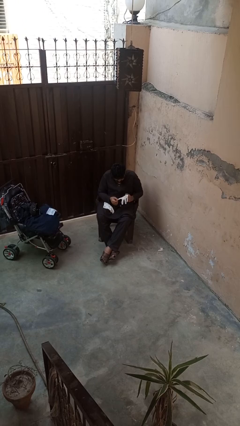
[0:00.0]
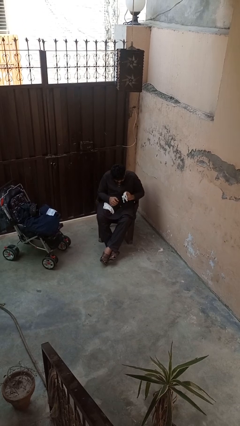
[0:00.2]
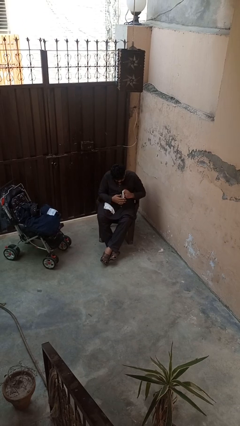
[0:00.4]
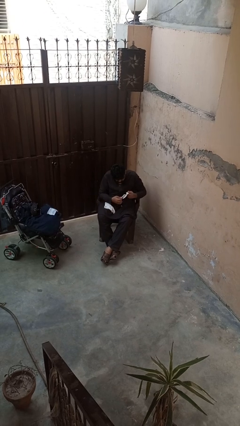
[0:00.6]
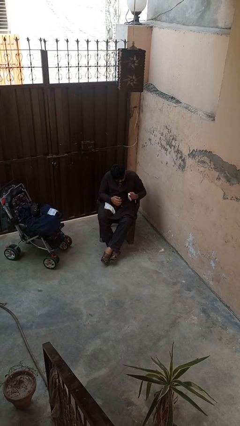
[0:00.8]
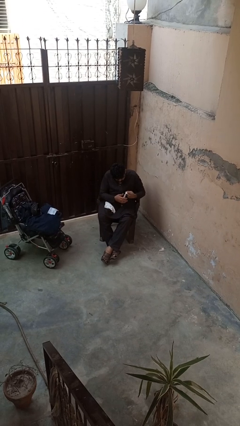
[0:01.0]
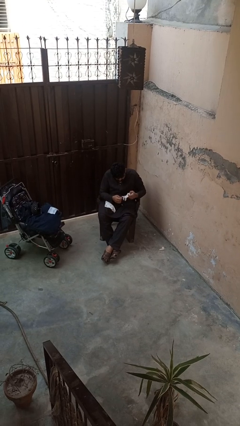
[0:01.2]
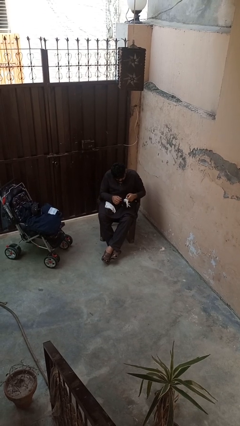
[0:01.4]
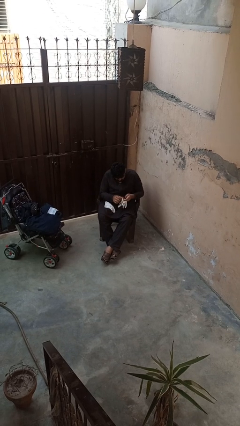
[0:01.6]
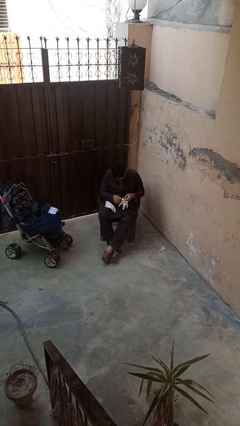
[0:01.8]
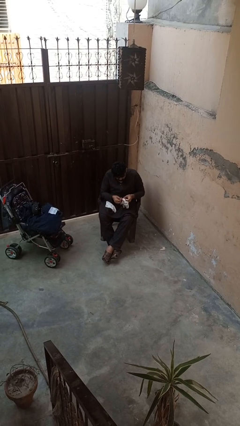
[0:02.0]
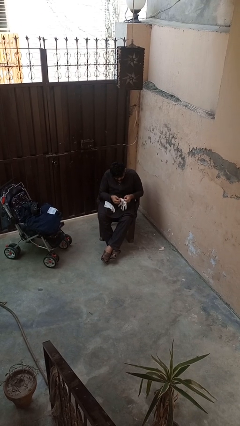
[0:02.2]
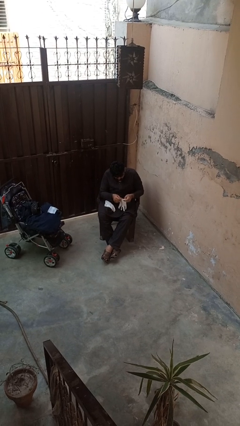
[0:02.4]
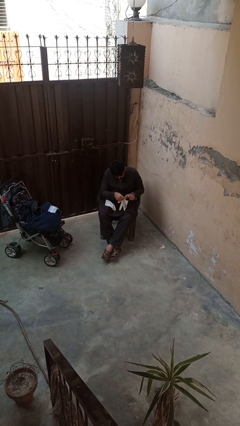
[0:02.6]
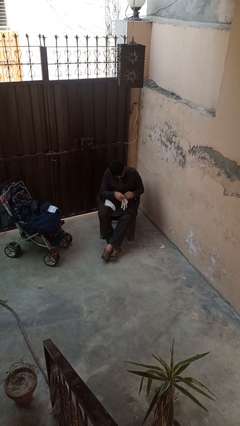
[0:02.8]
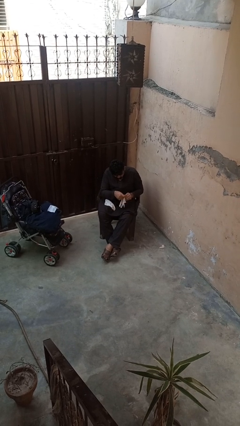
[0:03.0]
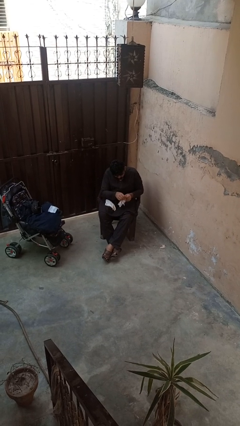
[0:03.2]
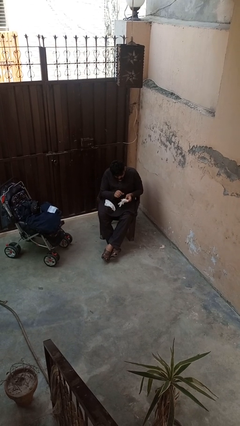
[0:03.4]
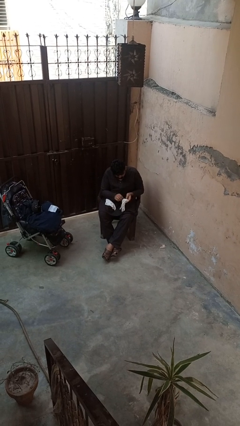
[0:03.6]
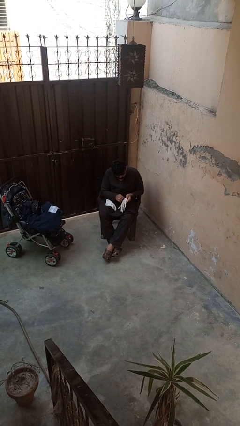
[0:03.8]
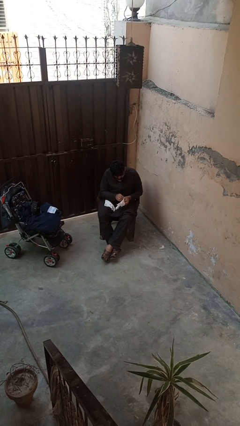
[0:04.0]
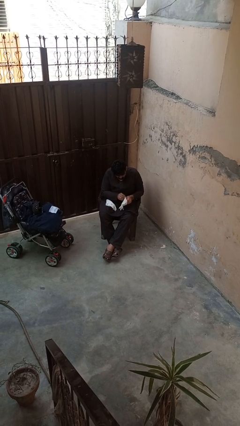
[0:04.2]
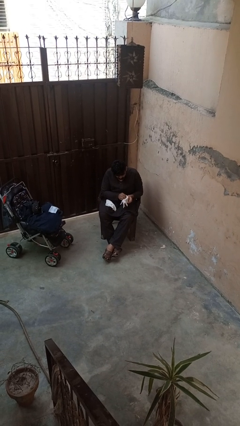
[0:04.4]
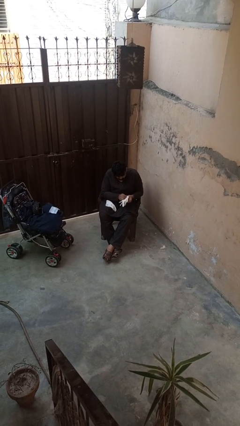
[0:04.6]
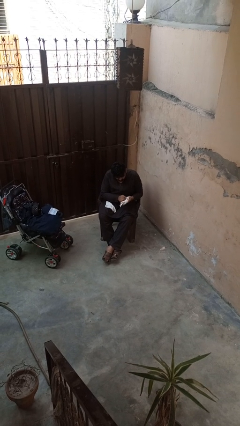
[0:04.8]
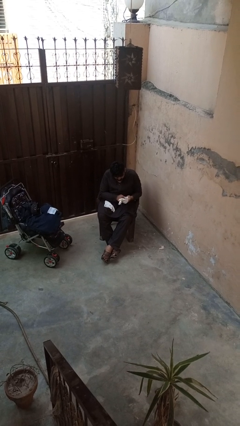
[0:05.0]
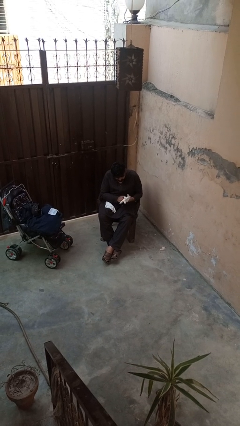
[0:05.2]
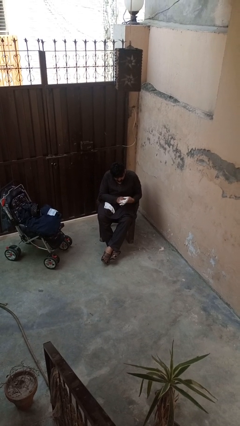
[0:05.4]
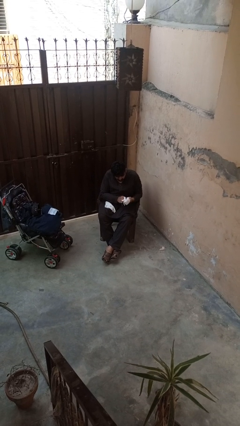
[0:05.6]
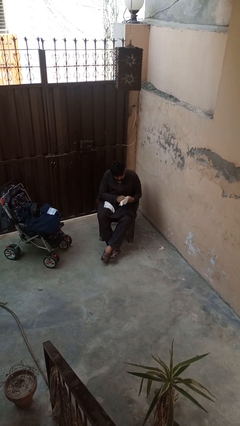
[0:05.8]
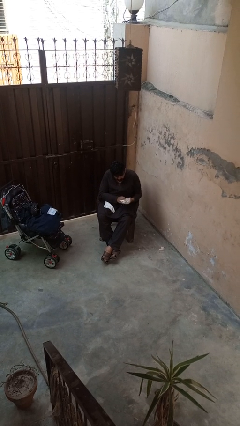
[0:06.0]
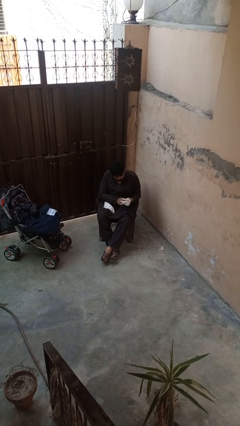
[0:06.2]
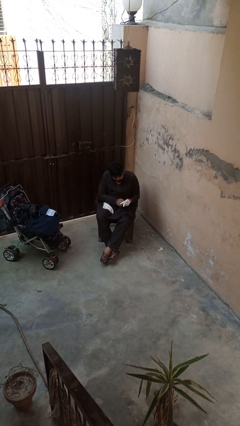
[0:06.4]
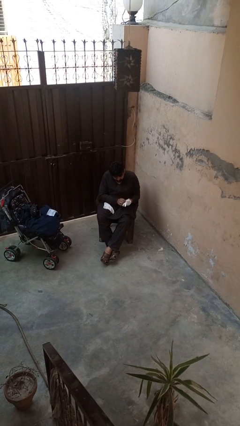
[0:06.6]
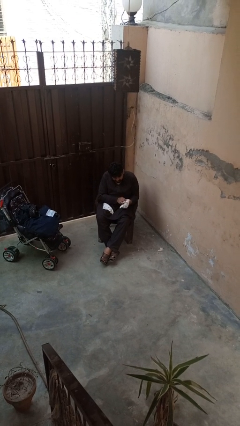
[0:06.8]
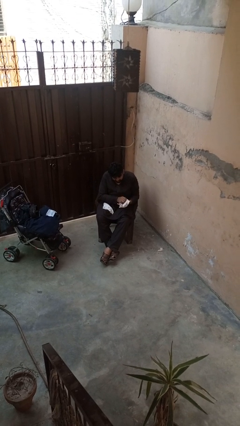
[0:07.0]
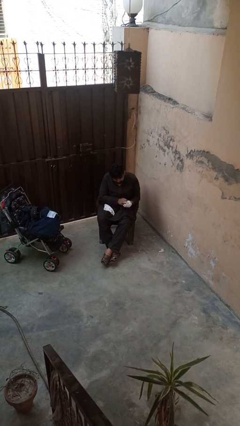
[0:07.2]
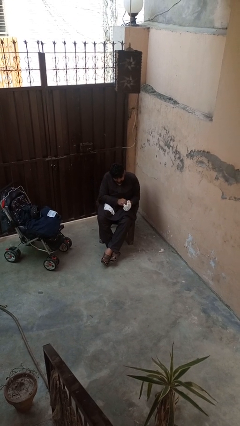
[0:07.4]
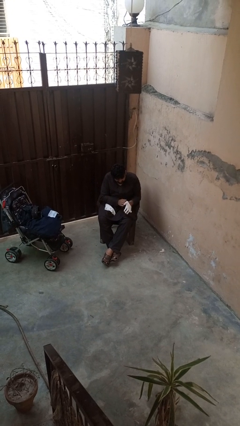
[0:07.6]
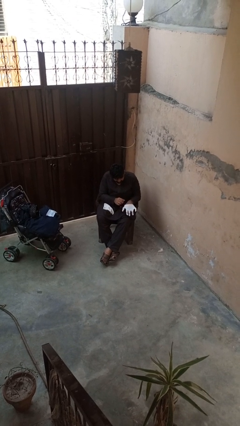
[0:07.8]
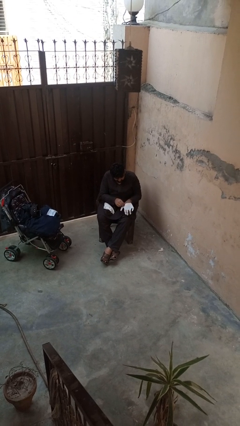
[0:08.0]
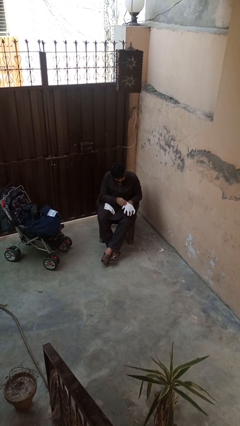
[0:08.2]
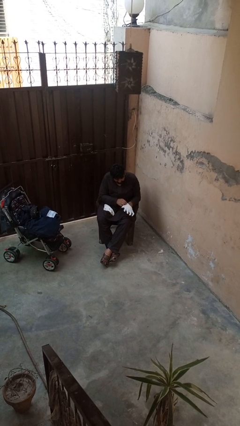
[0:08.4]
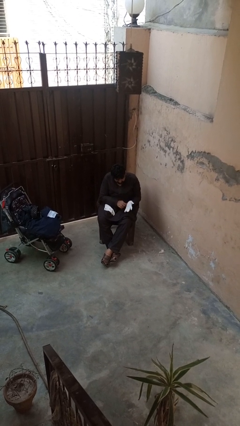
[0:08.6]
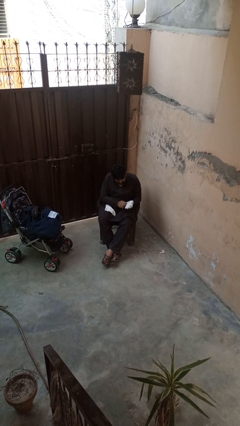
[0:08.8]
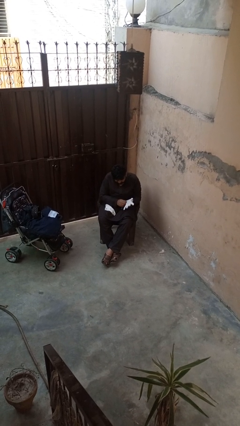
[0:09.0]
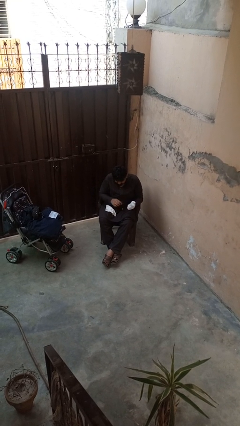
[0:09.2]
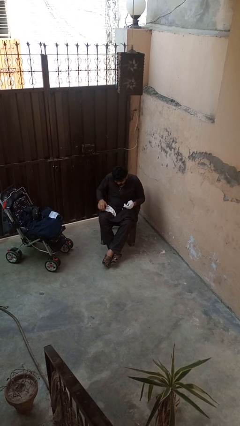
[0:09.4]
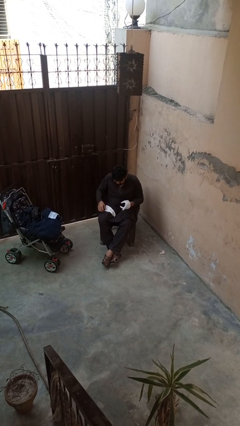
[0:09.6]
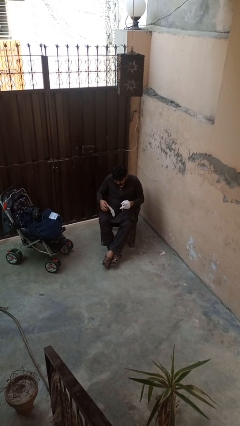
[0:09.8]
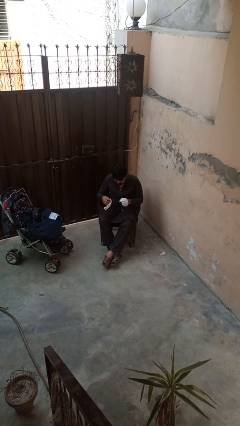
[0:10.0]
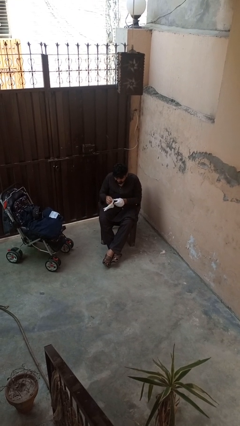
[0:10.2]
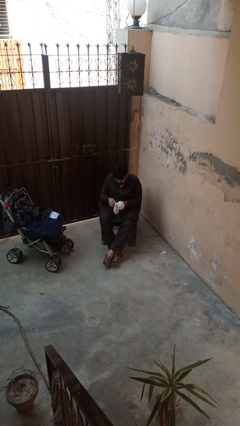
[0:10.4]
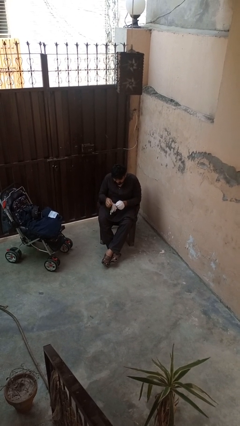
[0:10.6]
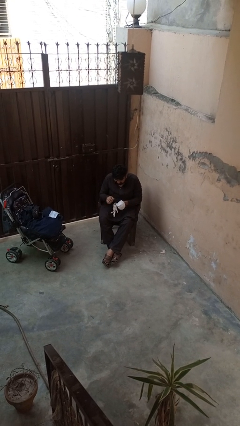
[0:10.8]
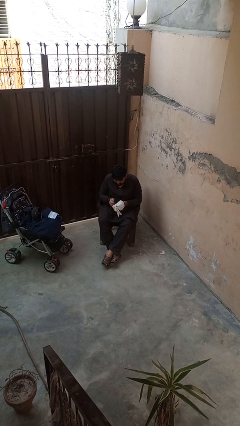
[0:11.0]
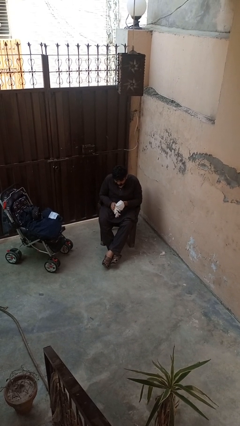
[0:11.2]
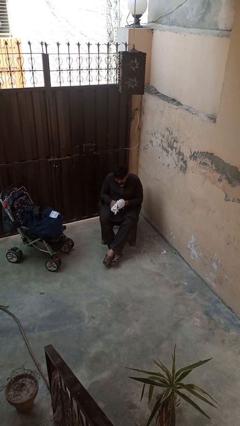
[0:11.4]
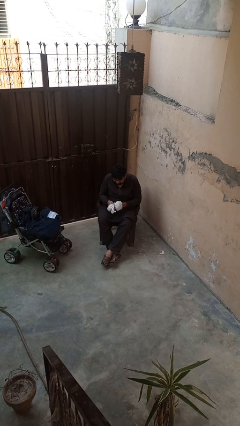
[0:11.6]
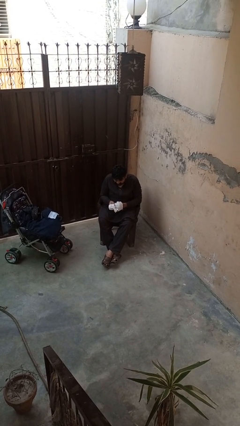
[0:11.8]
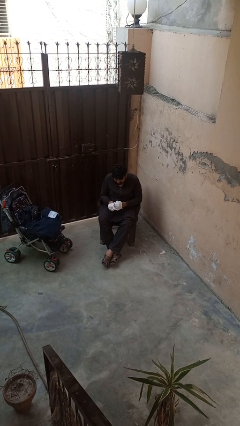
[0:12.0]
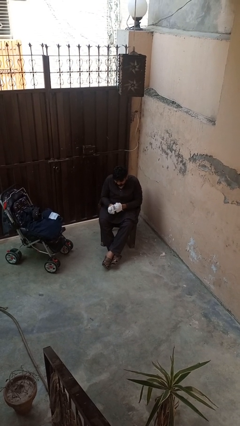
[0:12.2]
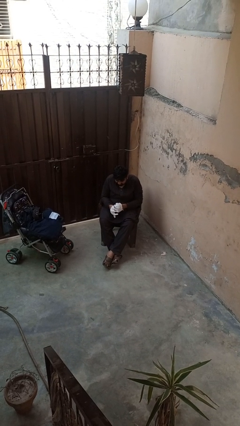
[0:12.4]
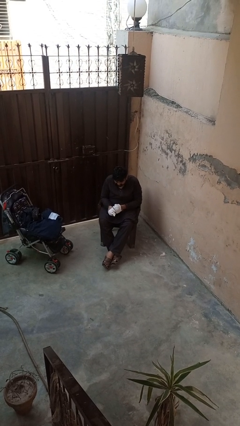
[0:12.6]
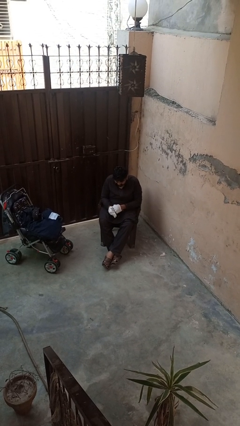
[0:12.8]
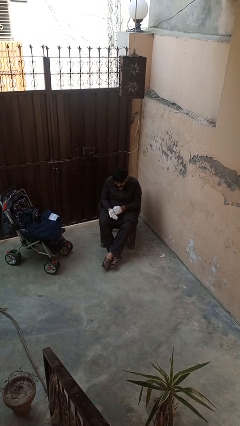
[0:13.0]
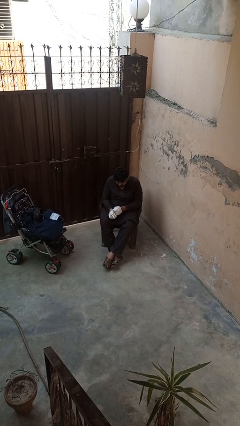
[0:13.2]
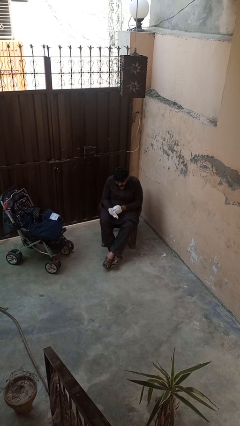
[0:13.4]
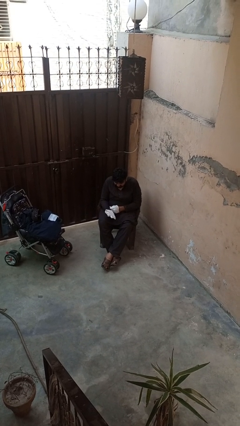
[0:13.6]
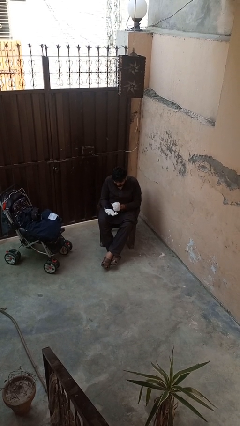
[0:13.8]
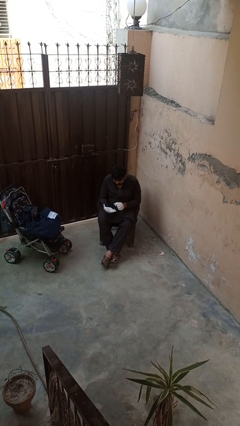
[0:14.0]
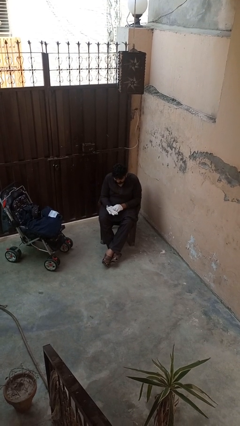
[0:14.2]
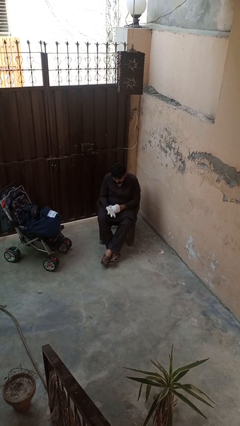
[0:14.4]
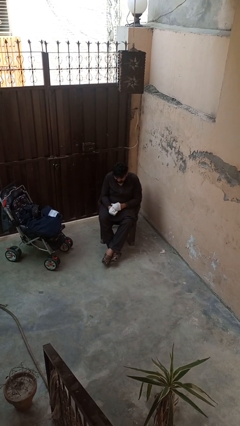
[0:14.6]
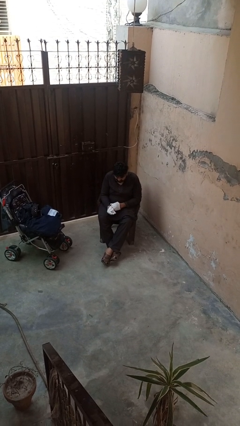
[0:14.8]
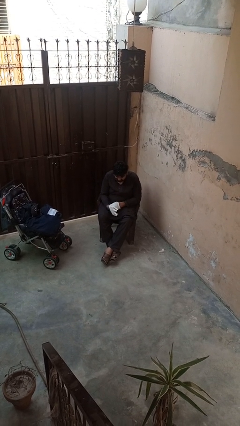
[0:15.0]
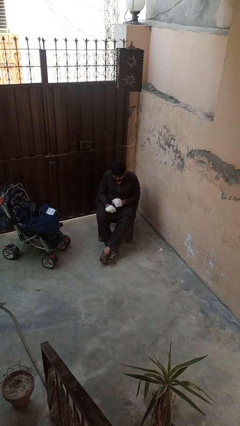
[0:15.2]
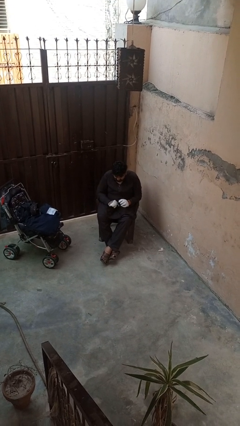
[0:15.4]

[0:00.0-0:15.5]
person puts on gloves

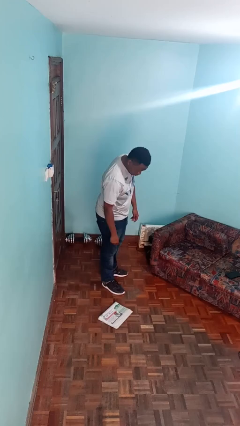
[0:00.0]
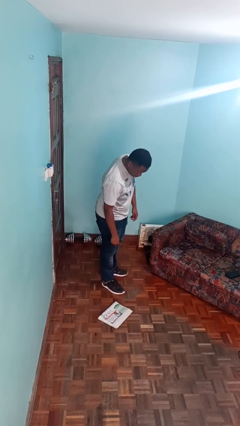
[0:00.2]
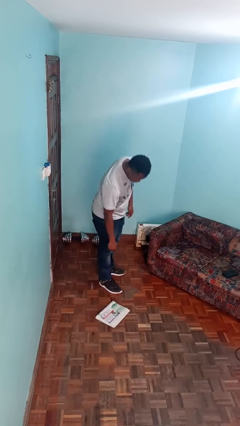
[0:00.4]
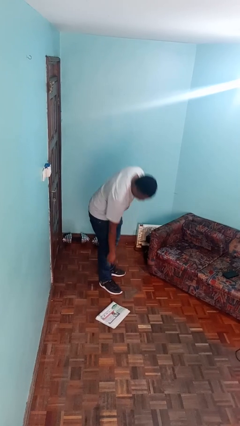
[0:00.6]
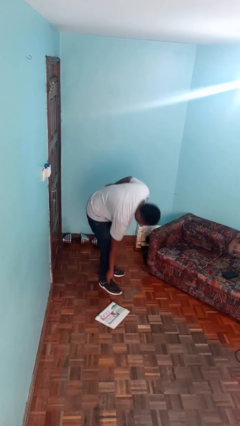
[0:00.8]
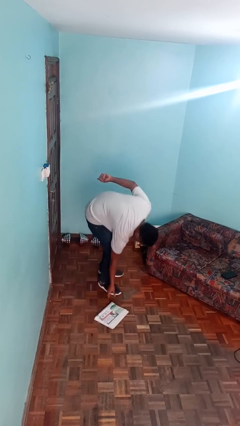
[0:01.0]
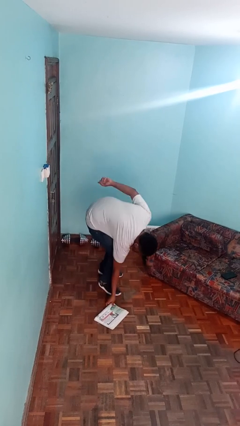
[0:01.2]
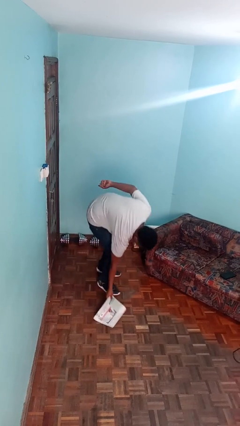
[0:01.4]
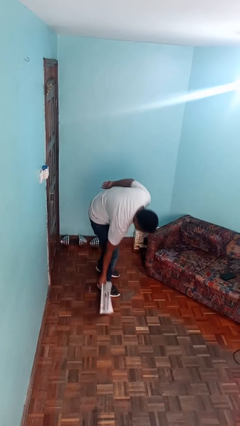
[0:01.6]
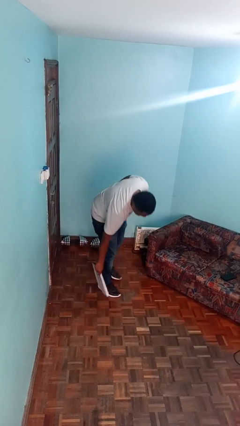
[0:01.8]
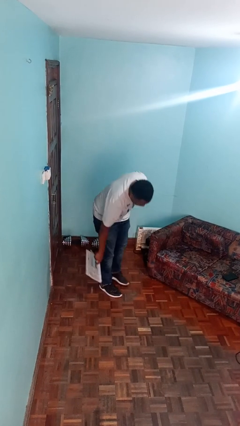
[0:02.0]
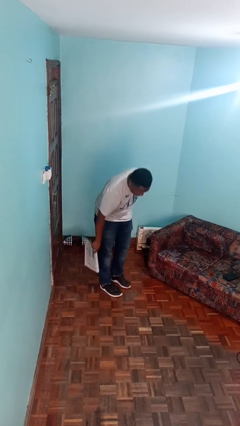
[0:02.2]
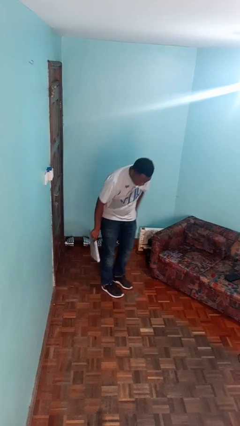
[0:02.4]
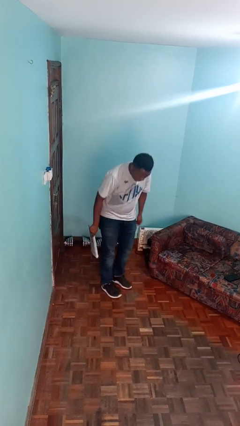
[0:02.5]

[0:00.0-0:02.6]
person picks up object from floor

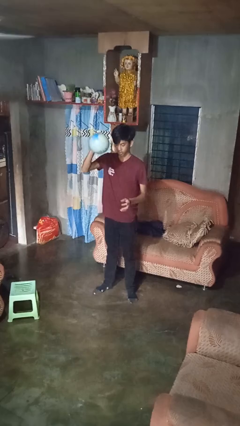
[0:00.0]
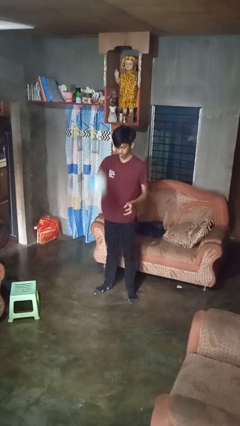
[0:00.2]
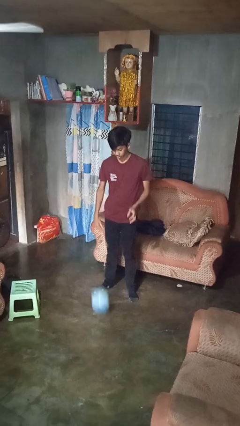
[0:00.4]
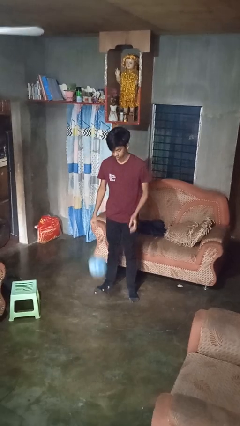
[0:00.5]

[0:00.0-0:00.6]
person bounces ball on floor
